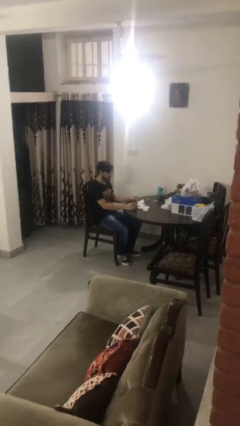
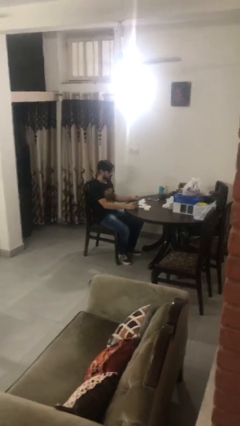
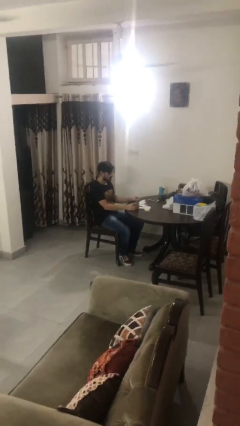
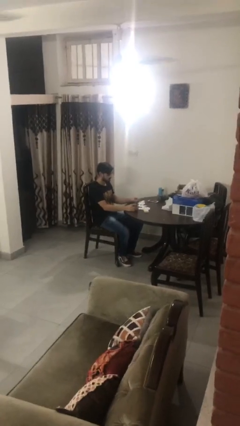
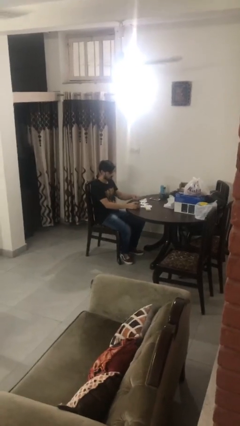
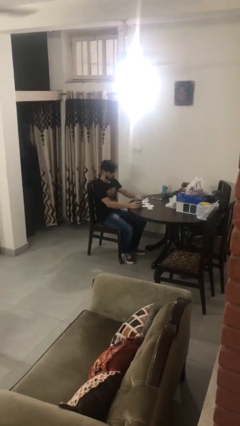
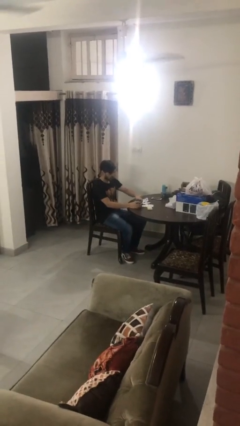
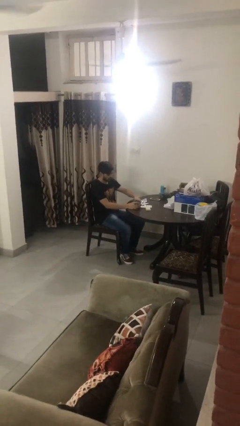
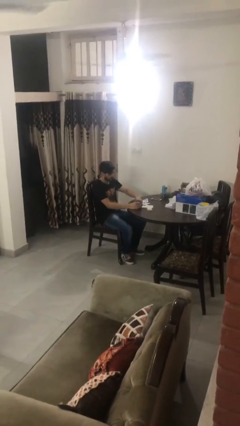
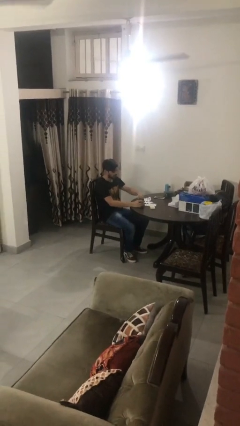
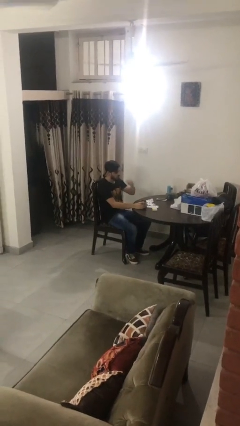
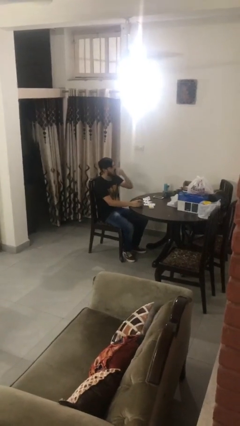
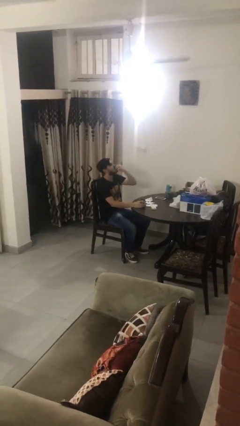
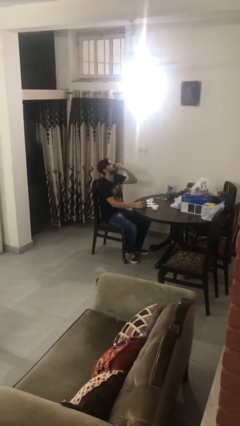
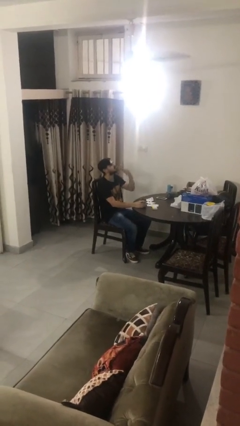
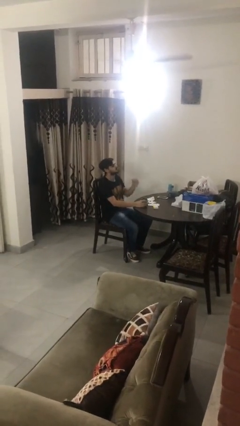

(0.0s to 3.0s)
person takes medicine pills

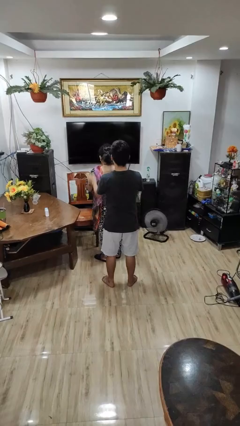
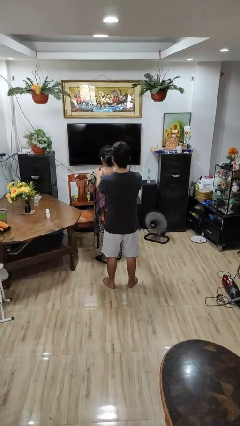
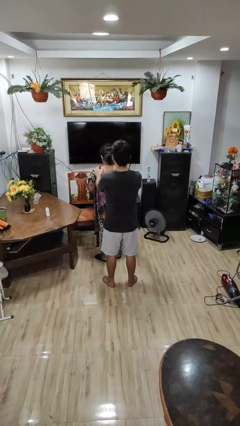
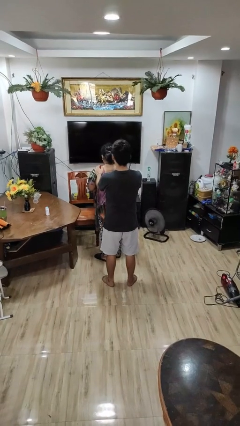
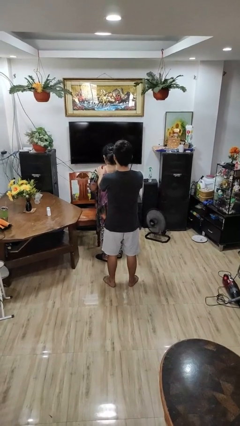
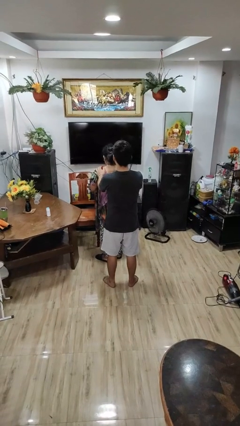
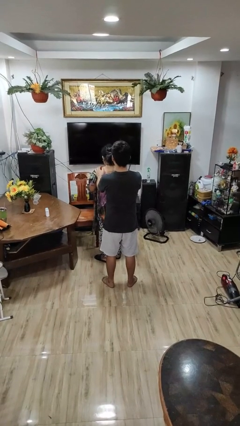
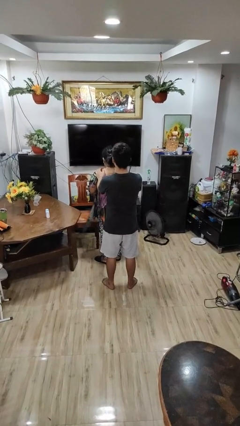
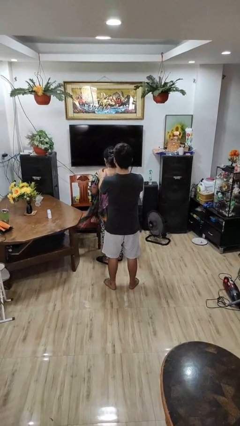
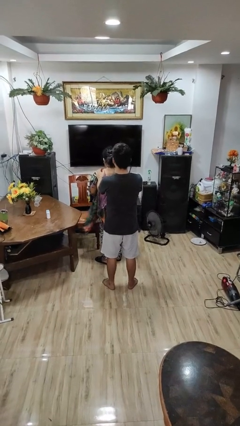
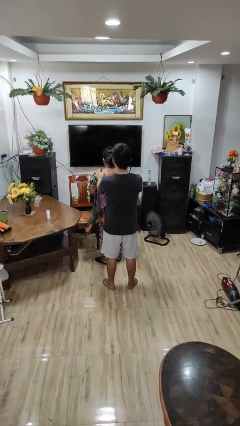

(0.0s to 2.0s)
person grabs person by shoulder

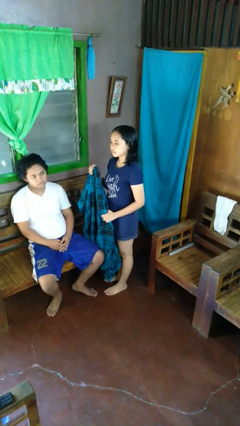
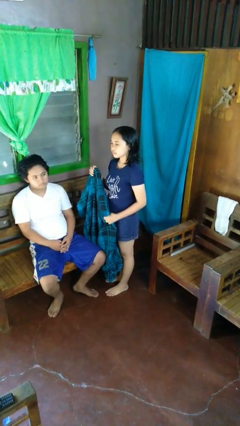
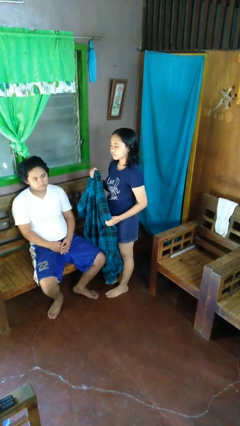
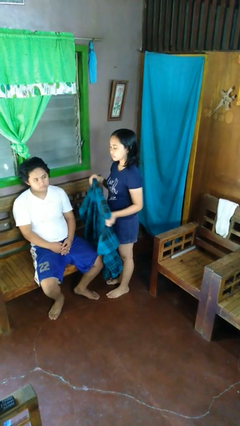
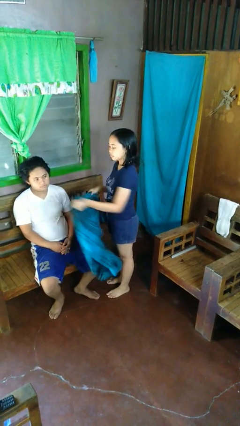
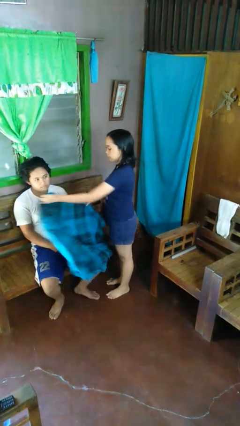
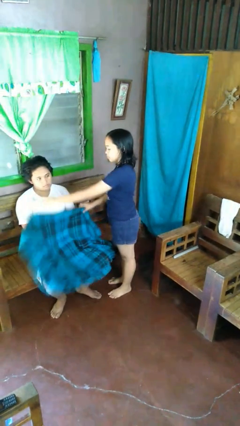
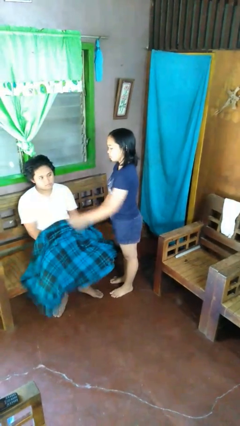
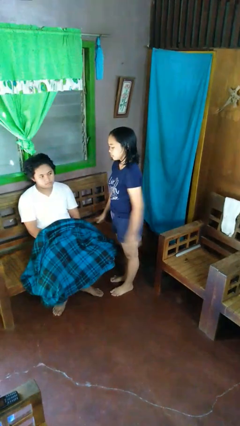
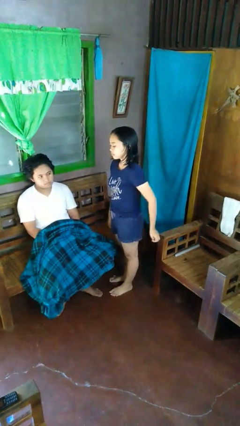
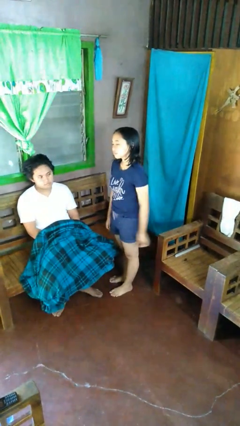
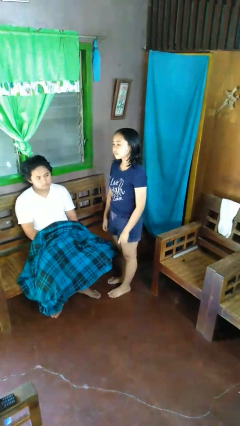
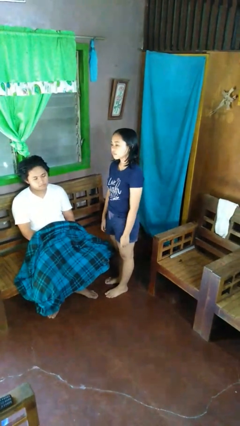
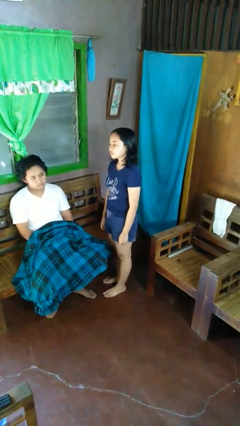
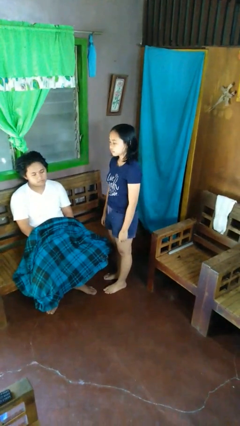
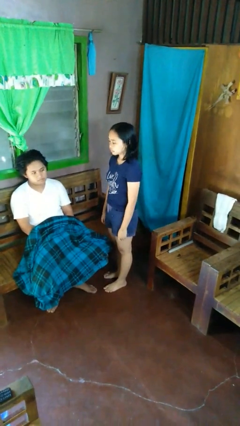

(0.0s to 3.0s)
person covers friend with blanket

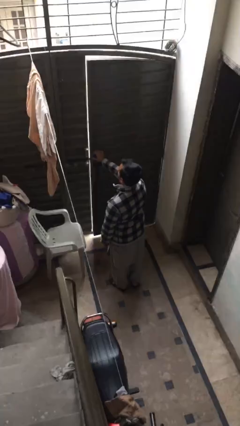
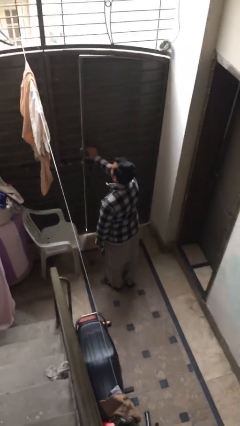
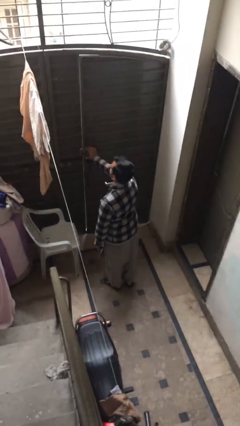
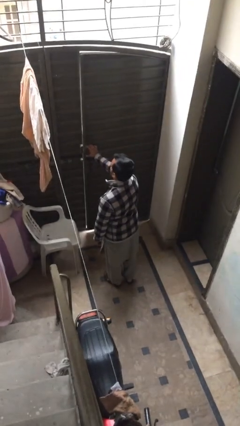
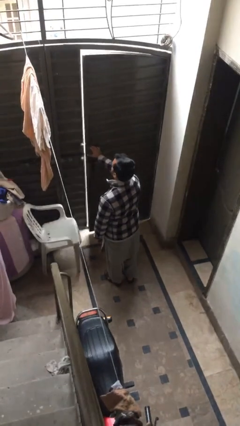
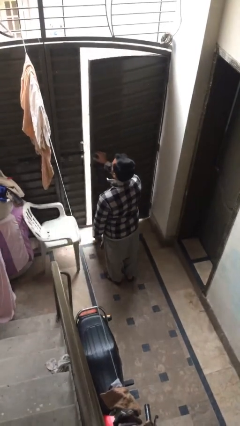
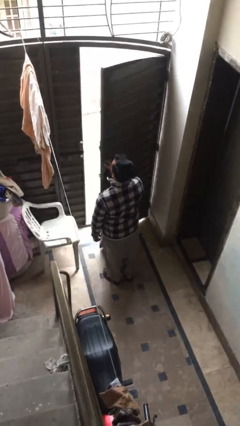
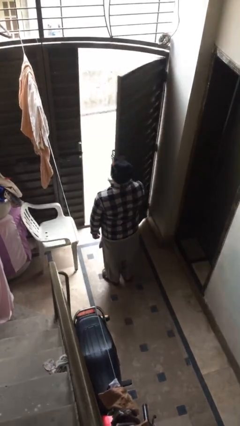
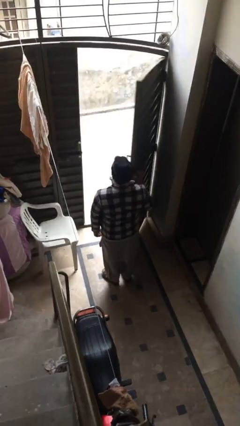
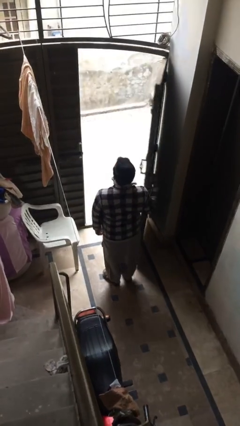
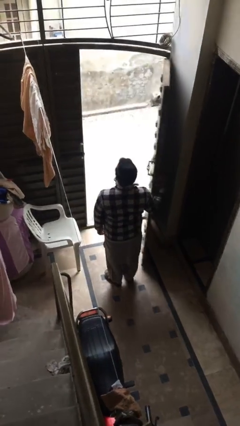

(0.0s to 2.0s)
person opens facility door

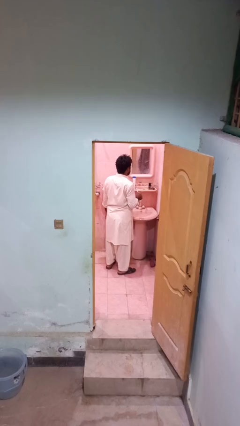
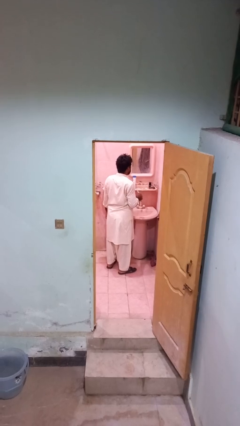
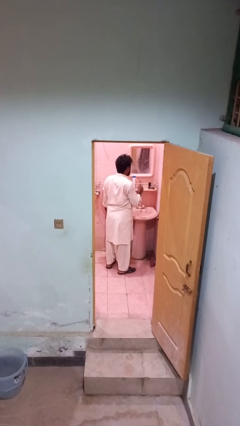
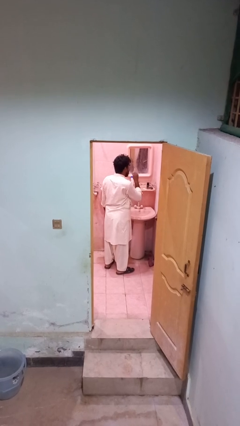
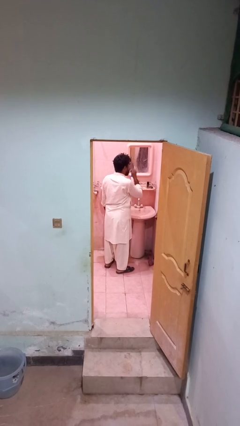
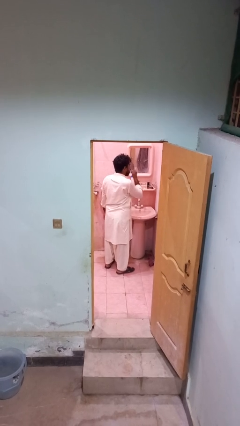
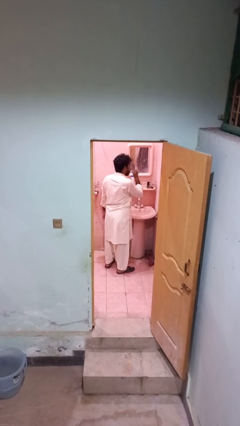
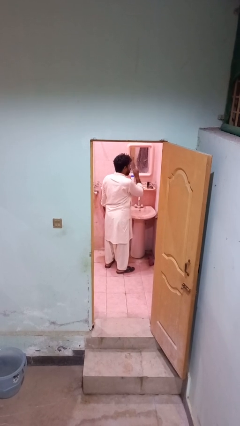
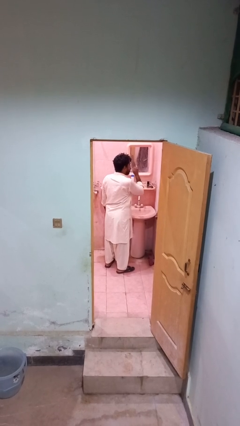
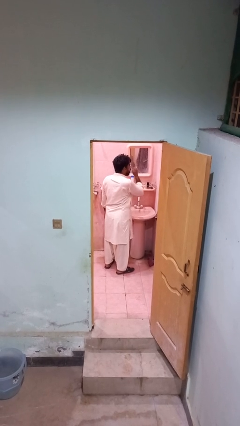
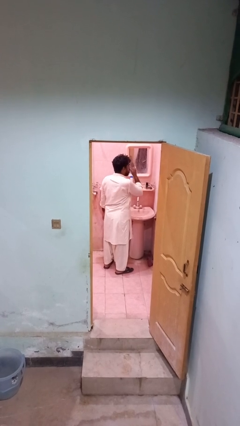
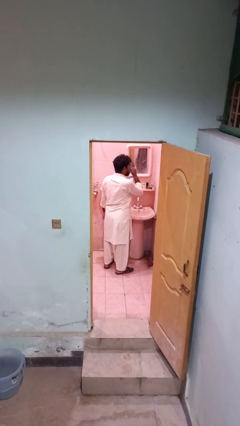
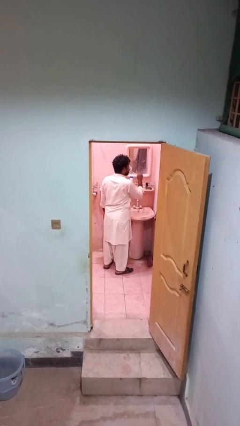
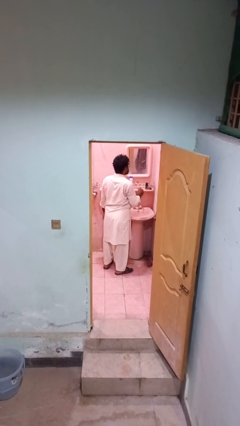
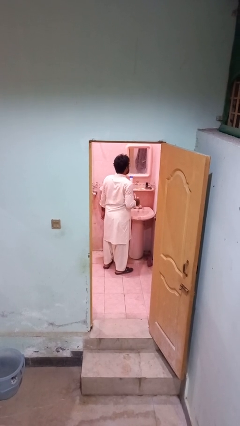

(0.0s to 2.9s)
person brushes teeth

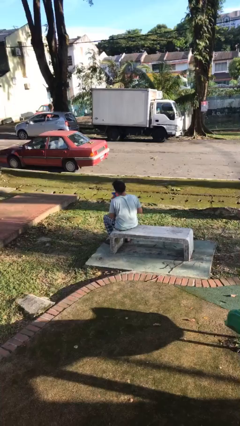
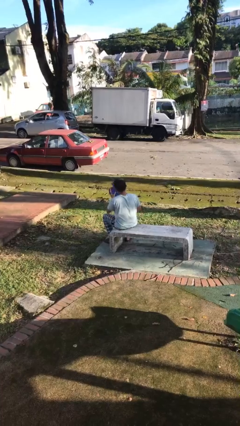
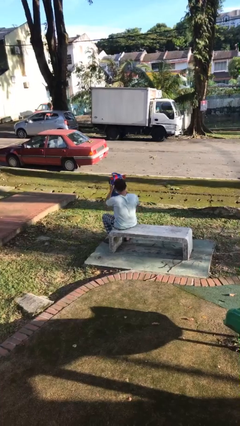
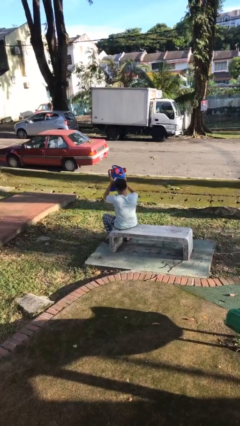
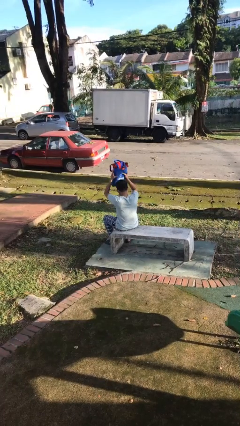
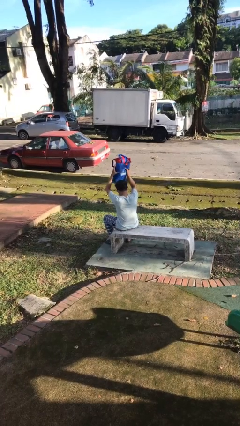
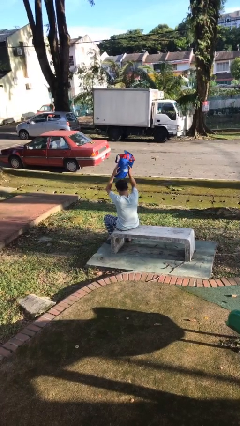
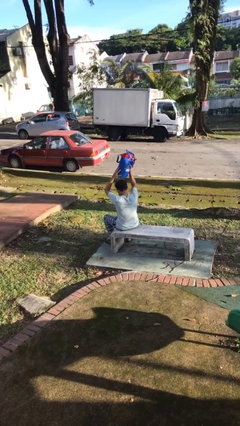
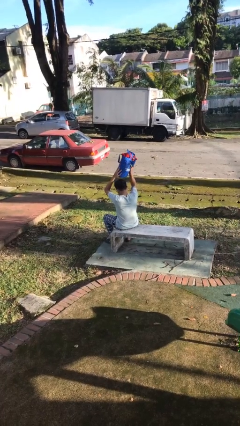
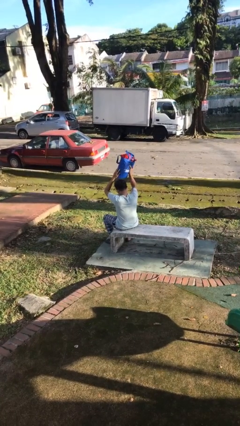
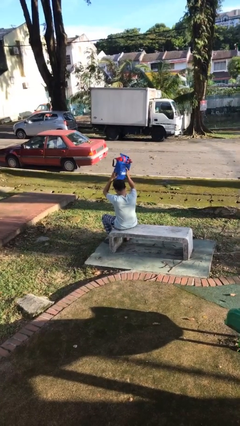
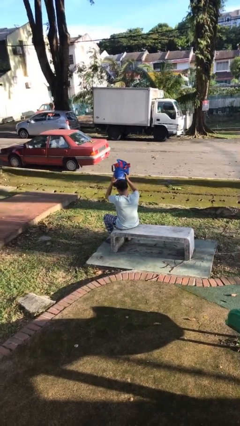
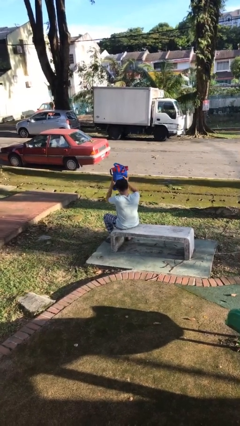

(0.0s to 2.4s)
person holds object above head

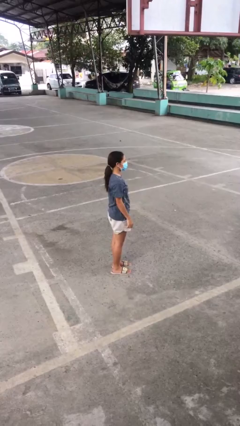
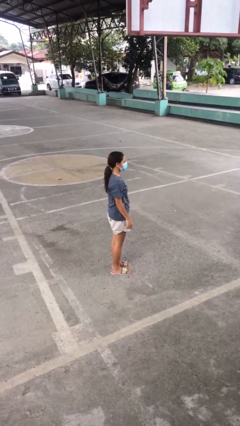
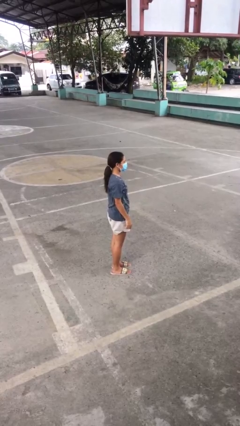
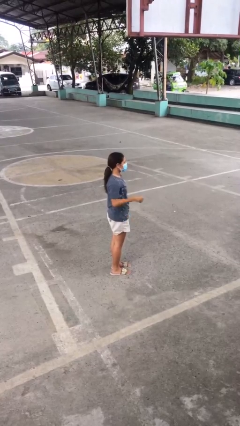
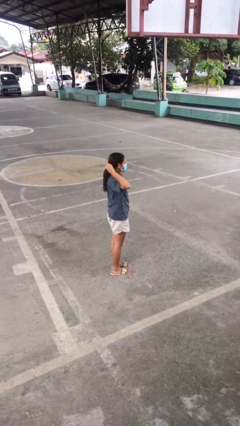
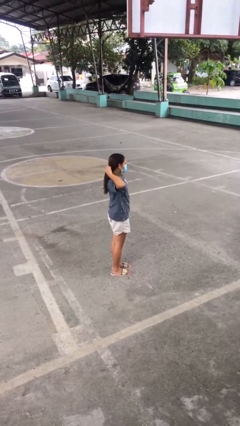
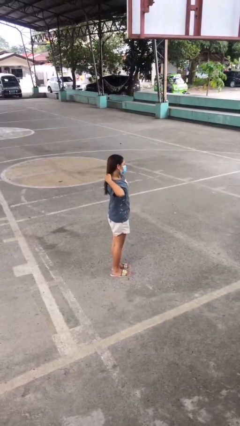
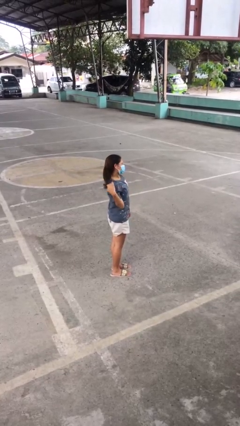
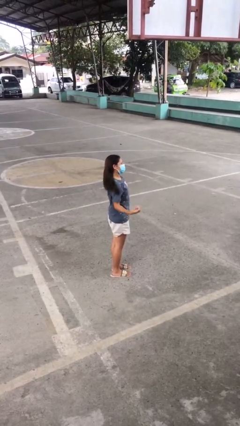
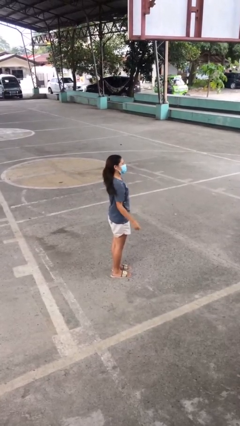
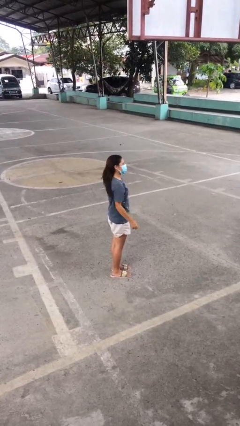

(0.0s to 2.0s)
person takes off hairtie

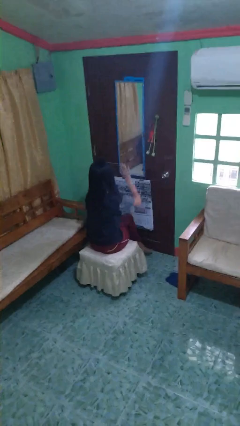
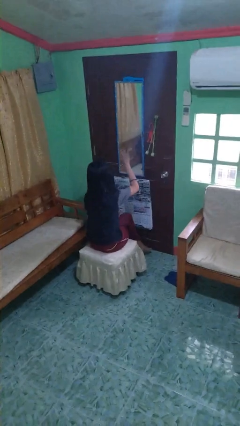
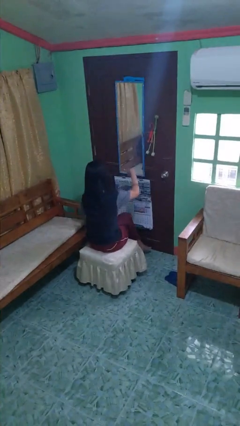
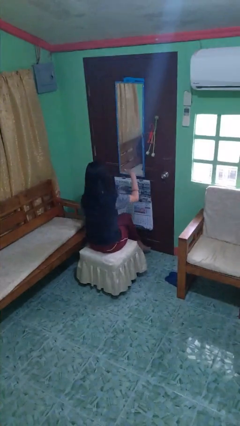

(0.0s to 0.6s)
person gestures come here
